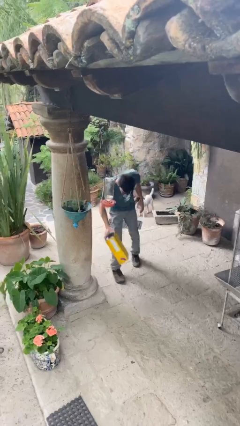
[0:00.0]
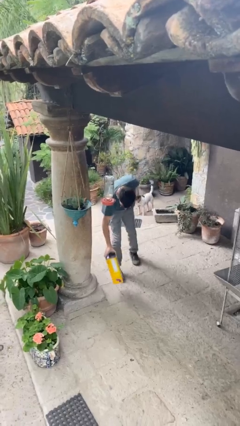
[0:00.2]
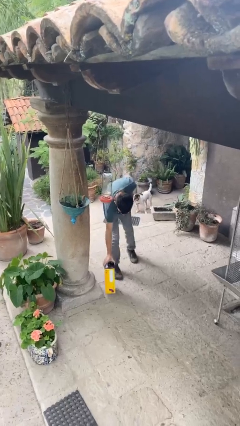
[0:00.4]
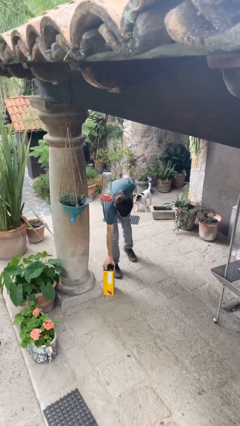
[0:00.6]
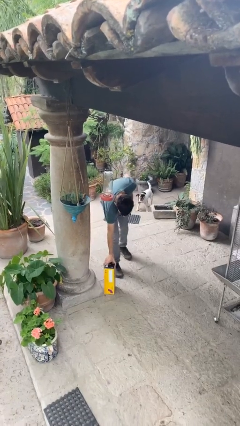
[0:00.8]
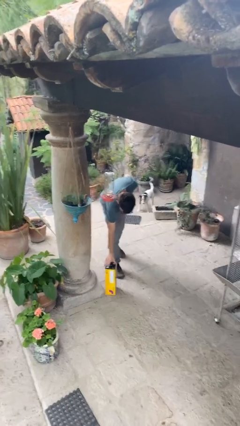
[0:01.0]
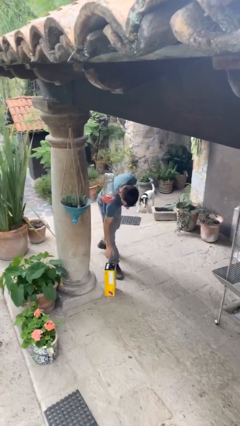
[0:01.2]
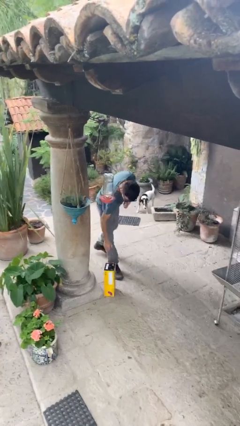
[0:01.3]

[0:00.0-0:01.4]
person puts down object on floor

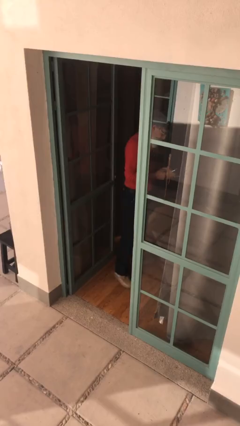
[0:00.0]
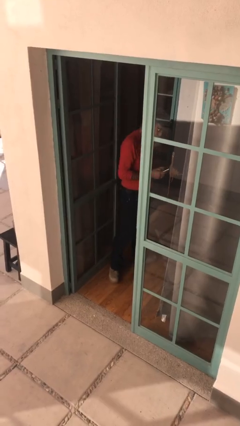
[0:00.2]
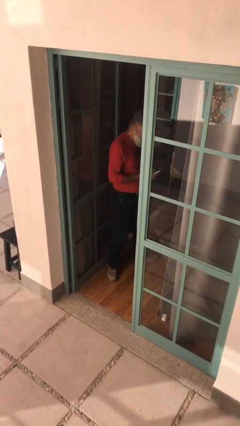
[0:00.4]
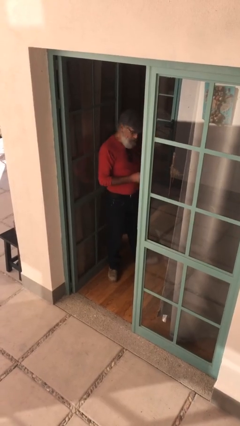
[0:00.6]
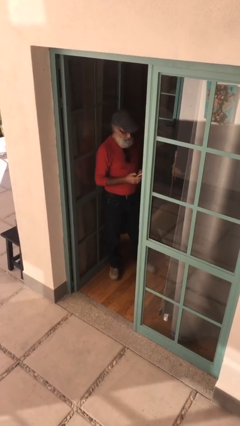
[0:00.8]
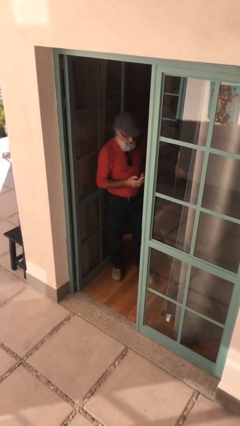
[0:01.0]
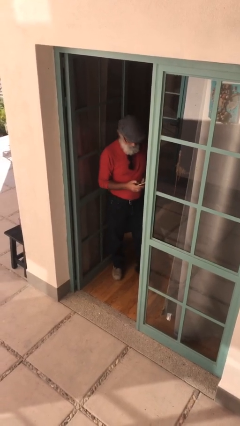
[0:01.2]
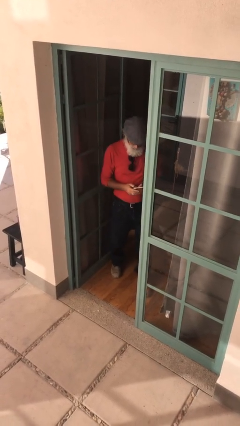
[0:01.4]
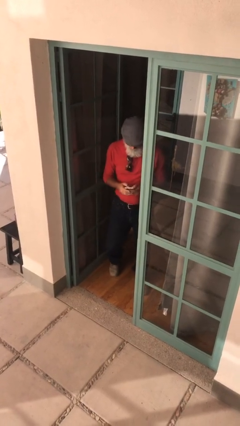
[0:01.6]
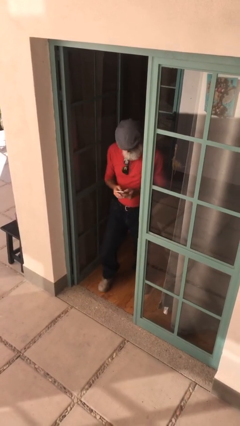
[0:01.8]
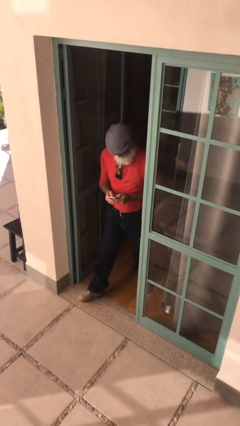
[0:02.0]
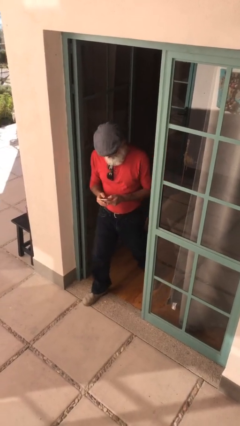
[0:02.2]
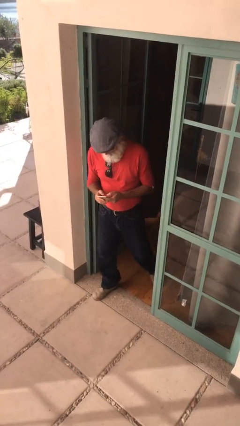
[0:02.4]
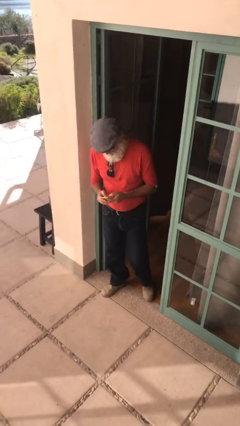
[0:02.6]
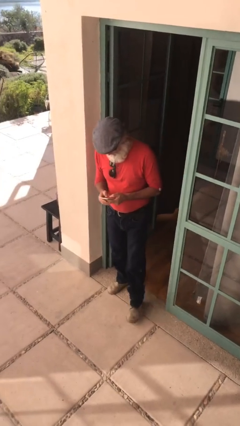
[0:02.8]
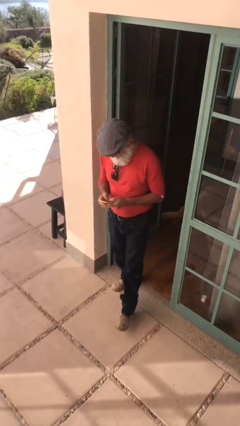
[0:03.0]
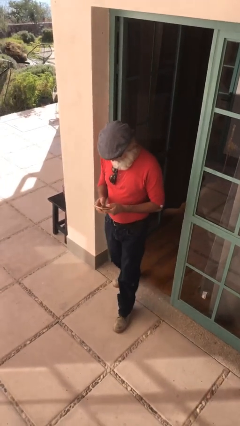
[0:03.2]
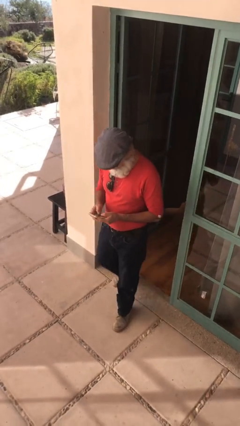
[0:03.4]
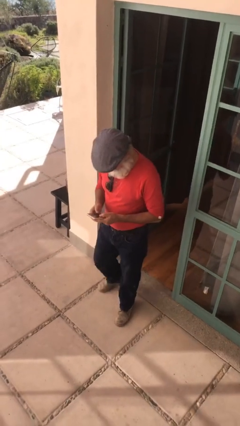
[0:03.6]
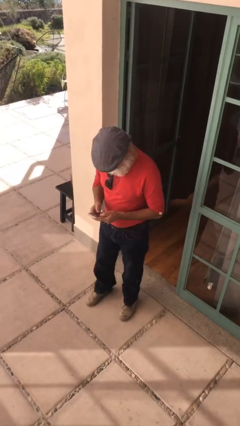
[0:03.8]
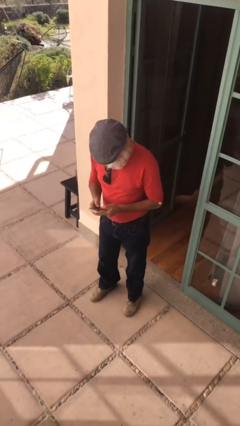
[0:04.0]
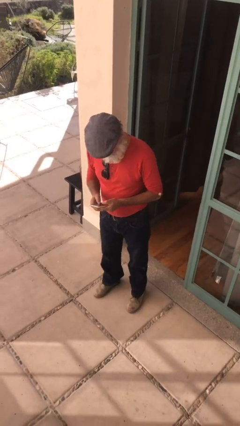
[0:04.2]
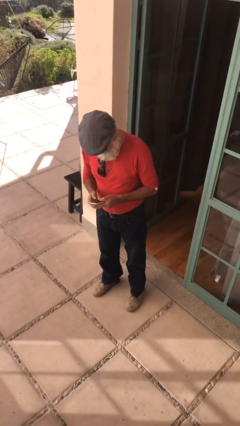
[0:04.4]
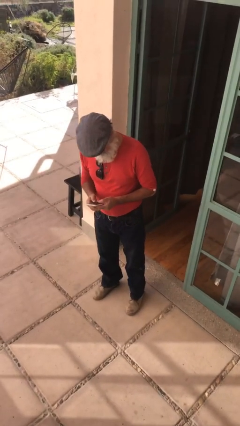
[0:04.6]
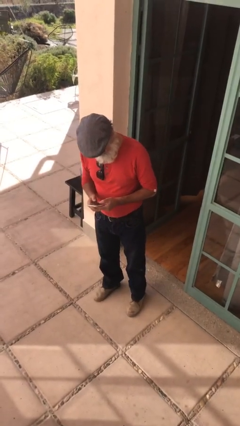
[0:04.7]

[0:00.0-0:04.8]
person enters scene through structure

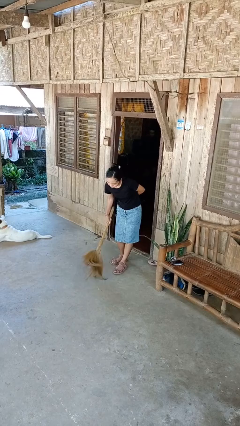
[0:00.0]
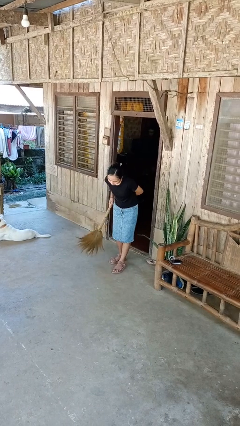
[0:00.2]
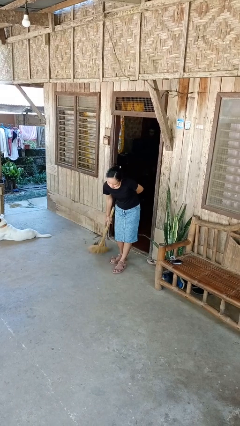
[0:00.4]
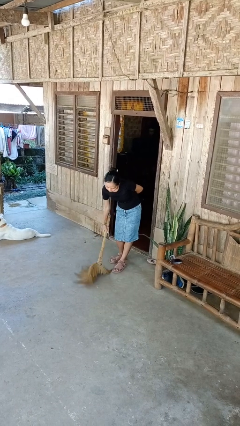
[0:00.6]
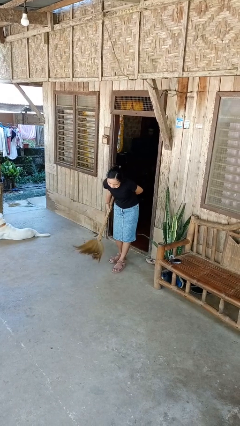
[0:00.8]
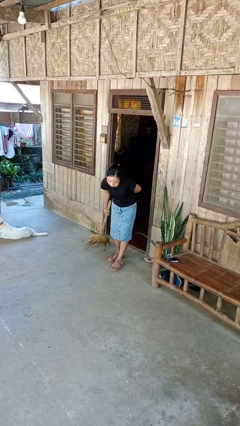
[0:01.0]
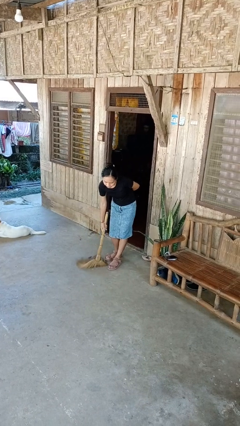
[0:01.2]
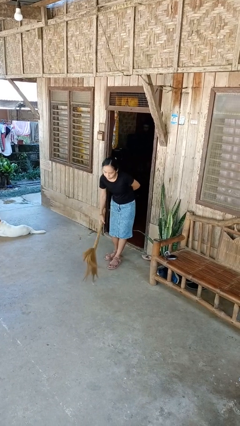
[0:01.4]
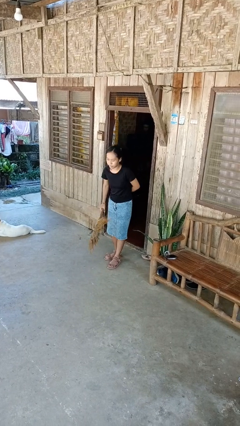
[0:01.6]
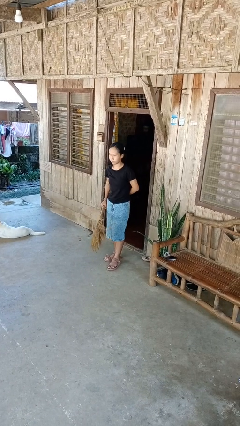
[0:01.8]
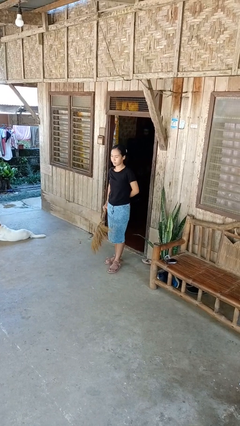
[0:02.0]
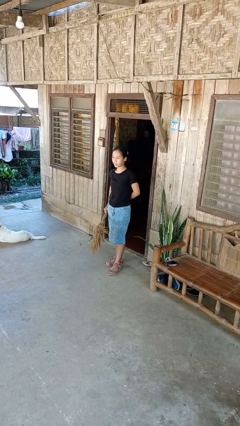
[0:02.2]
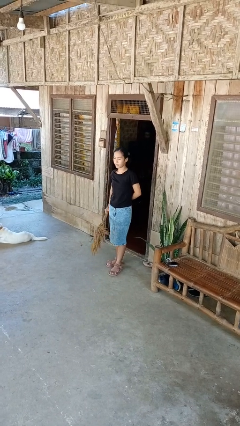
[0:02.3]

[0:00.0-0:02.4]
person sweeps floor

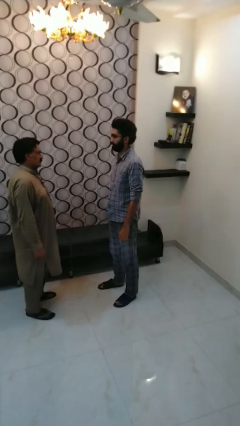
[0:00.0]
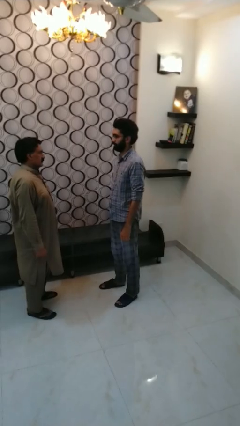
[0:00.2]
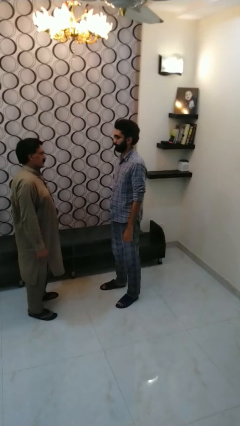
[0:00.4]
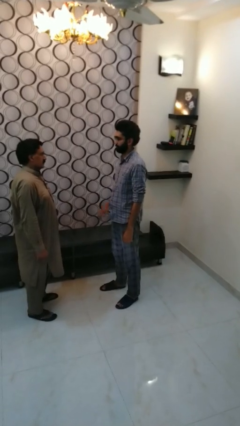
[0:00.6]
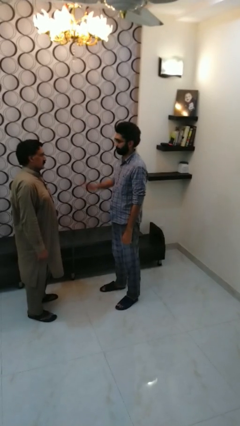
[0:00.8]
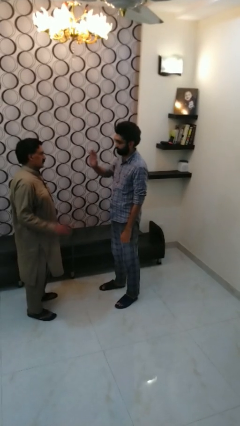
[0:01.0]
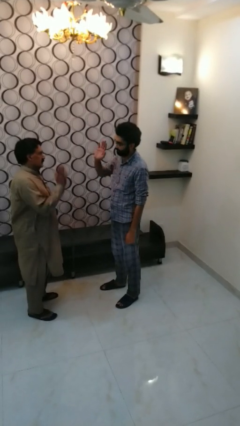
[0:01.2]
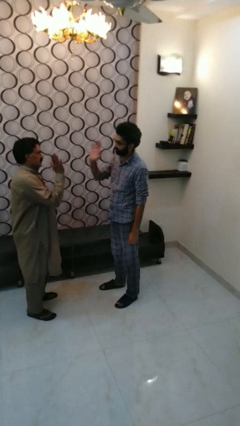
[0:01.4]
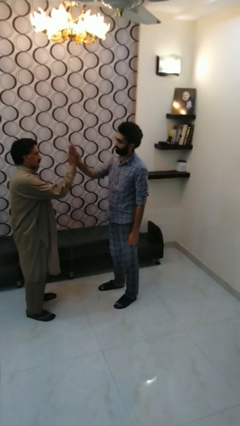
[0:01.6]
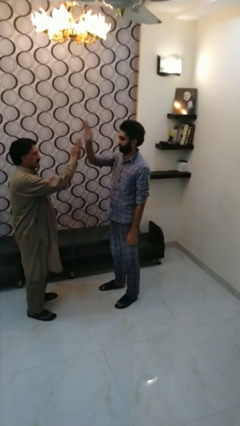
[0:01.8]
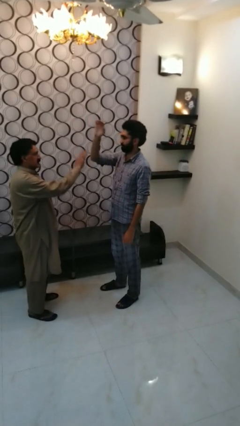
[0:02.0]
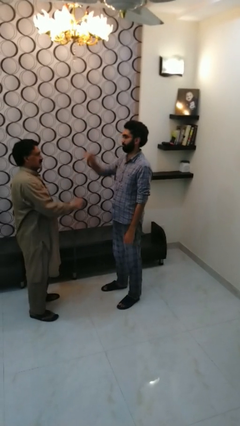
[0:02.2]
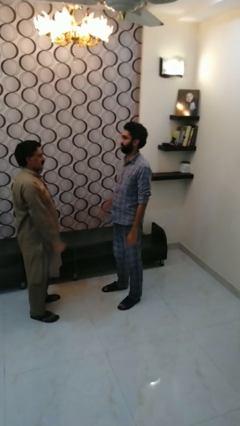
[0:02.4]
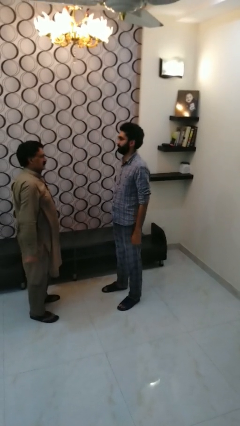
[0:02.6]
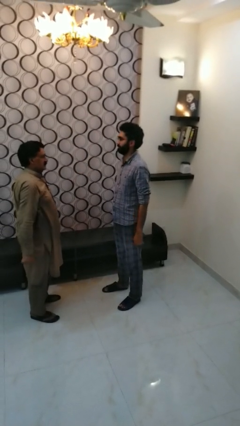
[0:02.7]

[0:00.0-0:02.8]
person highfives hand

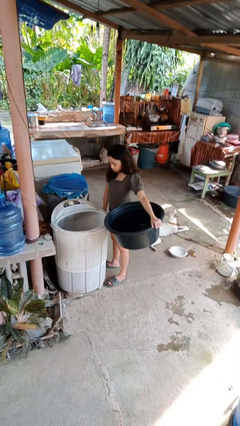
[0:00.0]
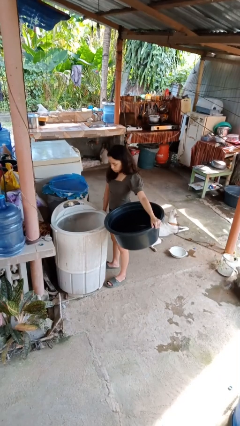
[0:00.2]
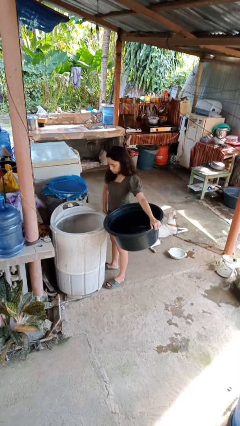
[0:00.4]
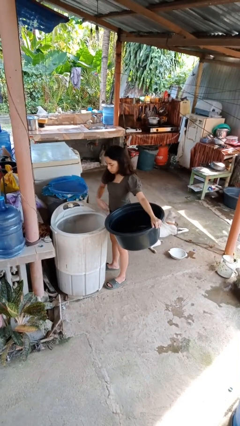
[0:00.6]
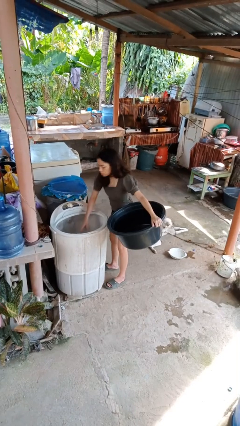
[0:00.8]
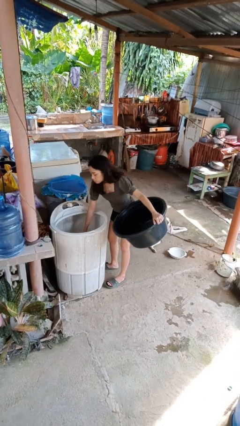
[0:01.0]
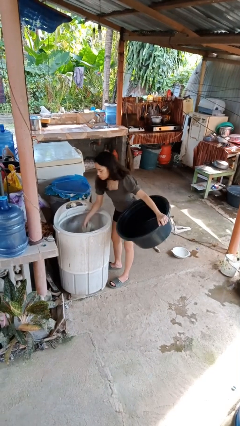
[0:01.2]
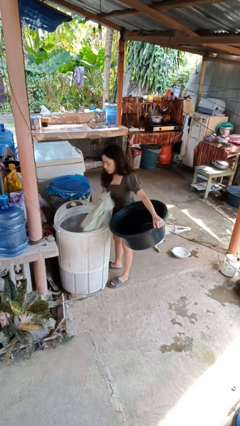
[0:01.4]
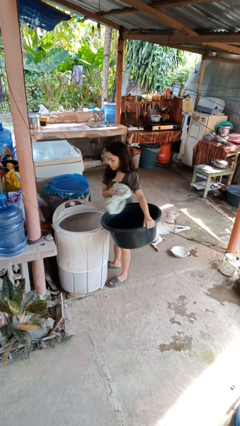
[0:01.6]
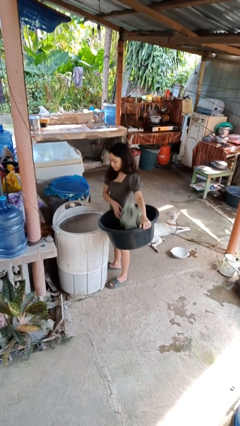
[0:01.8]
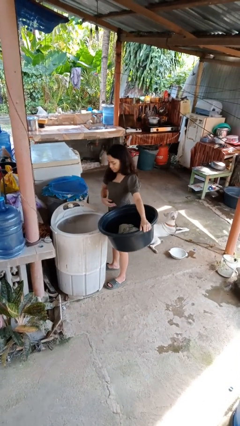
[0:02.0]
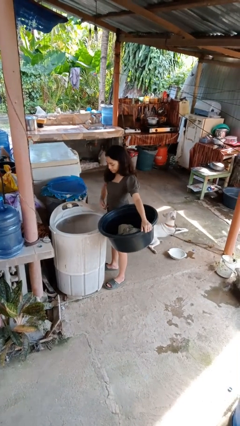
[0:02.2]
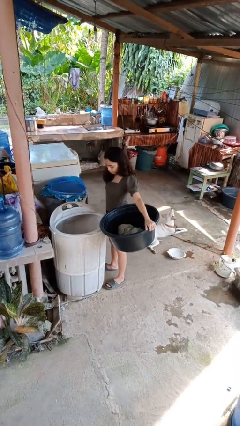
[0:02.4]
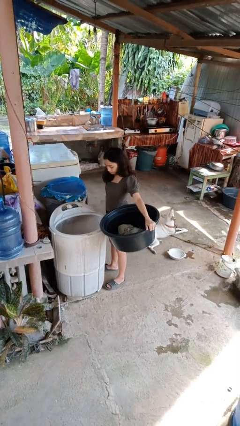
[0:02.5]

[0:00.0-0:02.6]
person unloads clotheswasher

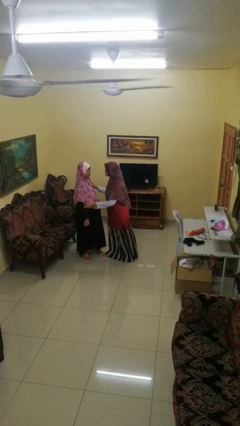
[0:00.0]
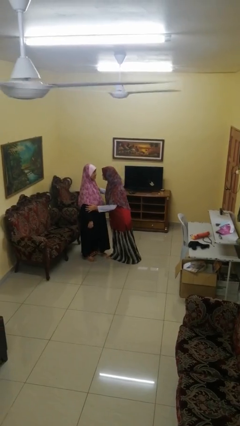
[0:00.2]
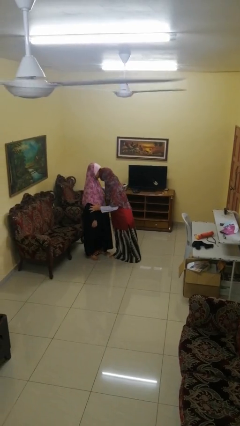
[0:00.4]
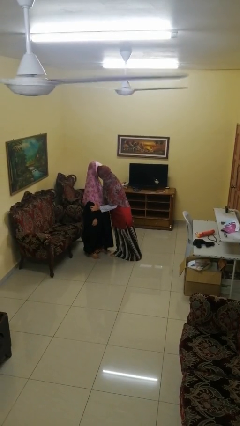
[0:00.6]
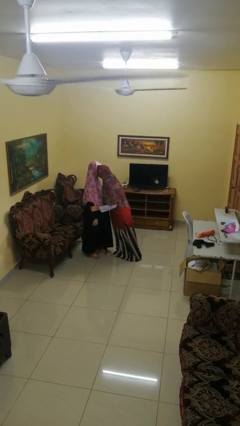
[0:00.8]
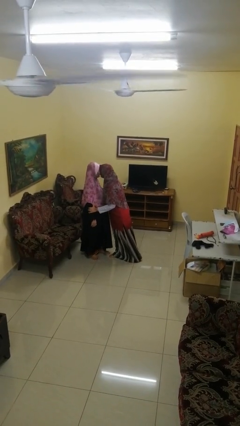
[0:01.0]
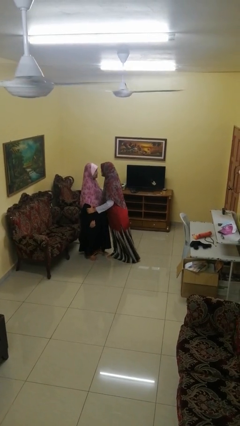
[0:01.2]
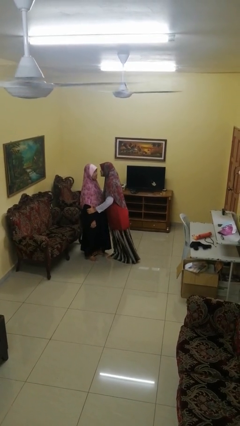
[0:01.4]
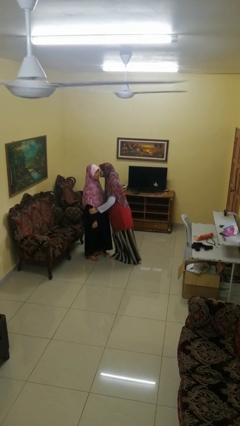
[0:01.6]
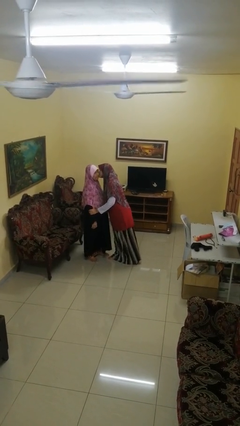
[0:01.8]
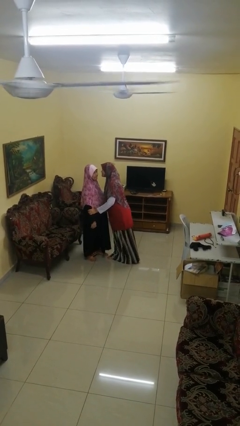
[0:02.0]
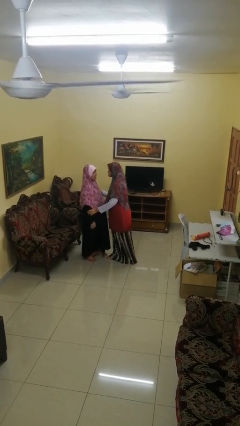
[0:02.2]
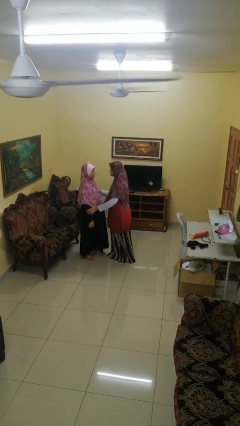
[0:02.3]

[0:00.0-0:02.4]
person kisses cheek of person

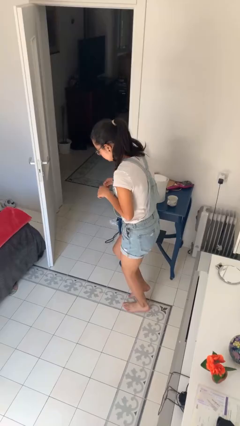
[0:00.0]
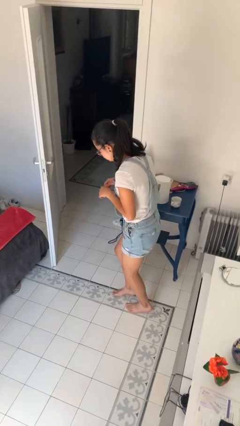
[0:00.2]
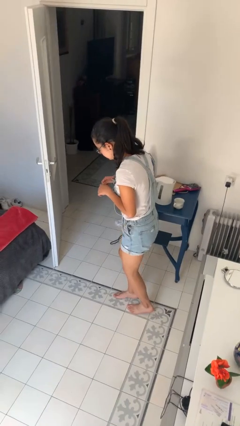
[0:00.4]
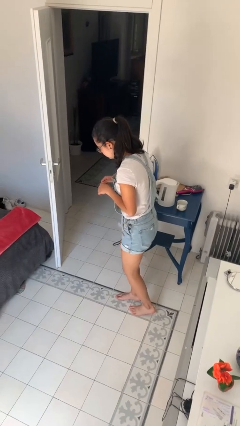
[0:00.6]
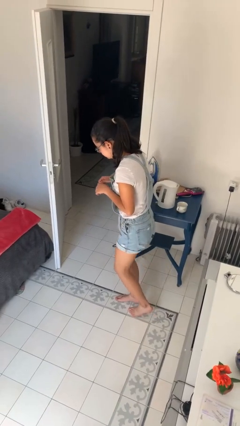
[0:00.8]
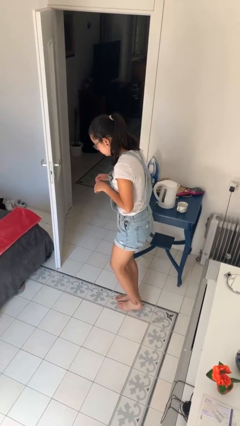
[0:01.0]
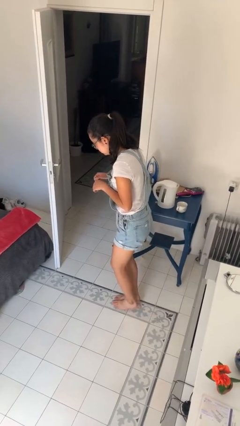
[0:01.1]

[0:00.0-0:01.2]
person walks tiptoe
